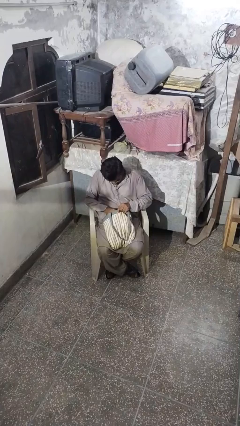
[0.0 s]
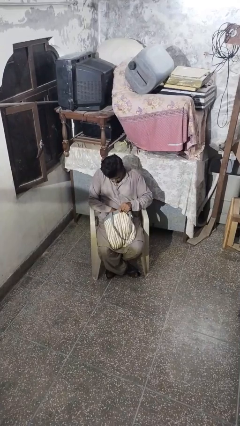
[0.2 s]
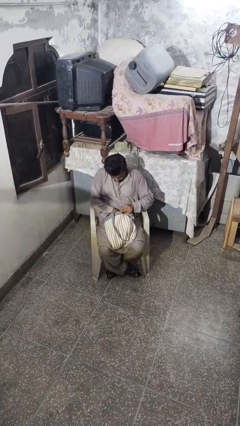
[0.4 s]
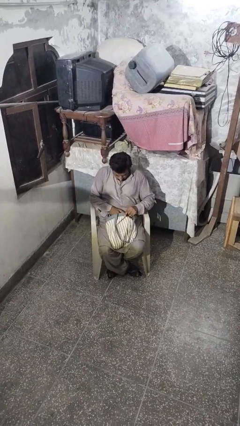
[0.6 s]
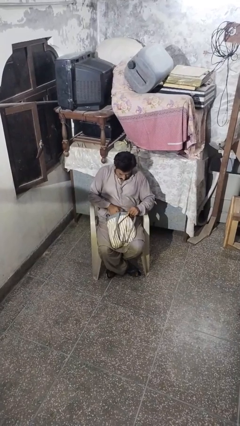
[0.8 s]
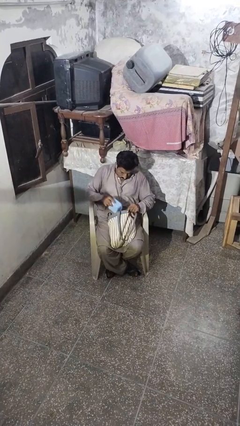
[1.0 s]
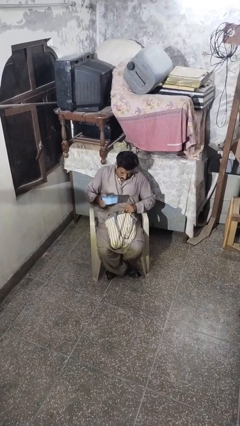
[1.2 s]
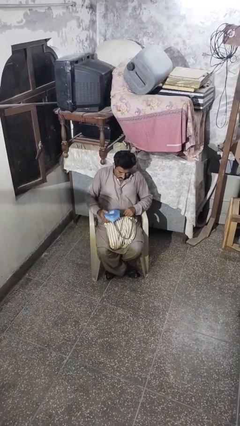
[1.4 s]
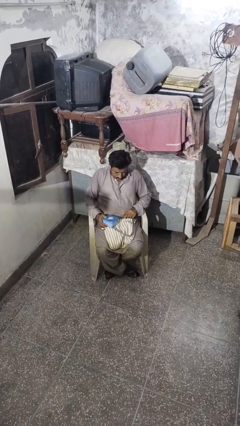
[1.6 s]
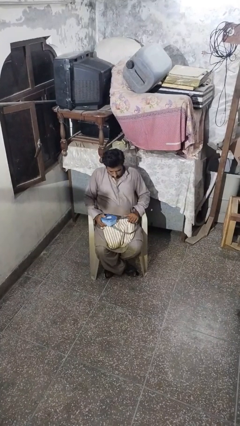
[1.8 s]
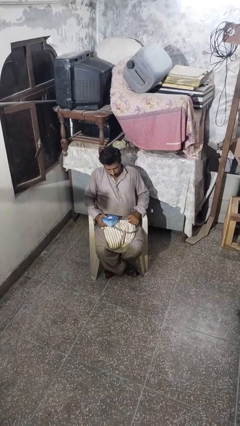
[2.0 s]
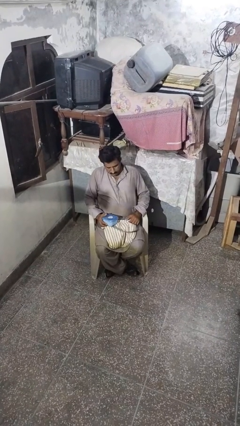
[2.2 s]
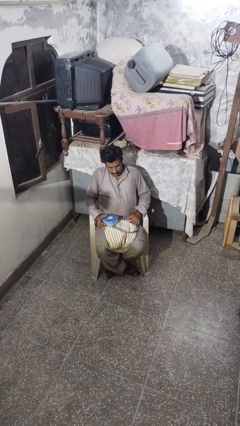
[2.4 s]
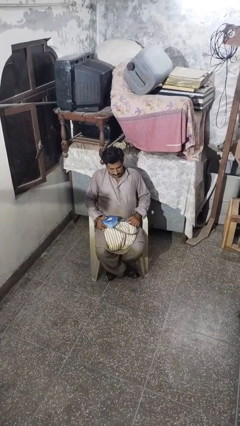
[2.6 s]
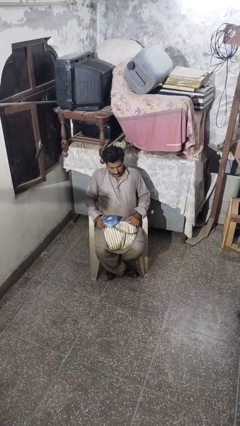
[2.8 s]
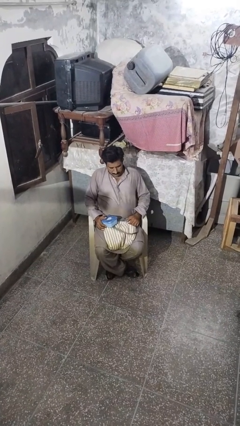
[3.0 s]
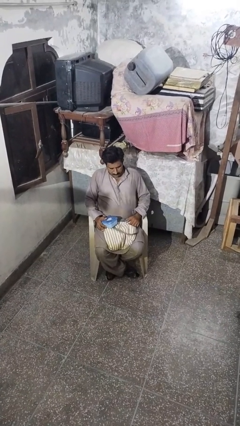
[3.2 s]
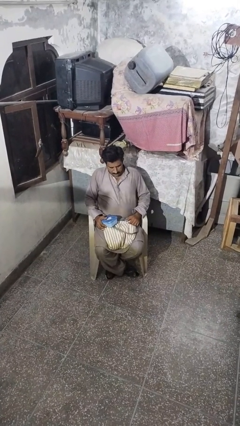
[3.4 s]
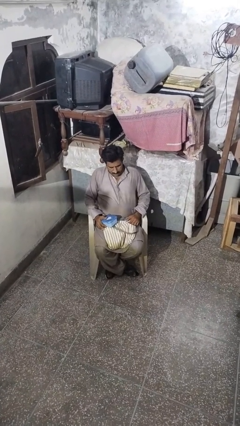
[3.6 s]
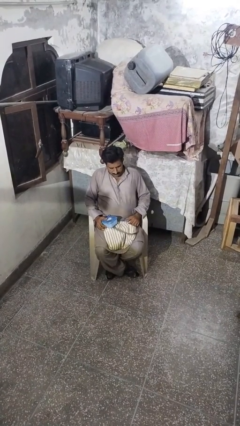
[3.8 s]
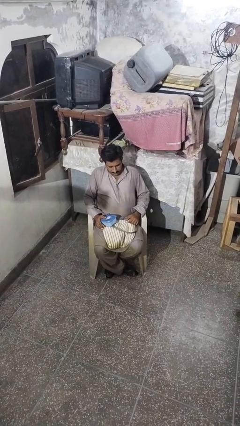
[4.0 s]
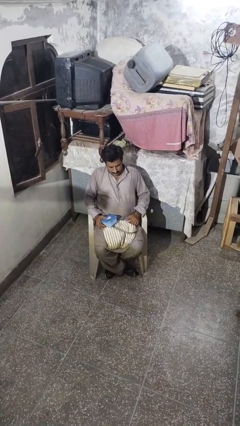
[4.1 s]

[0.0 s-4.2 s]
person takes object from backpack

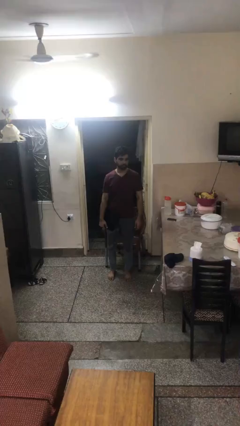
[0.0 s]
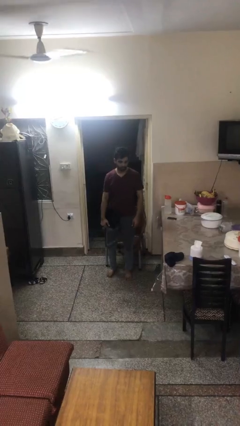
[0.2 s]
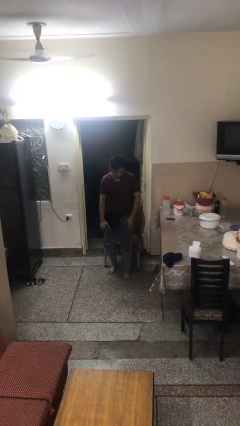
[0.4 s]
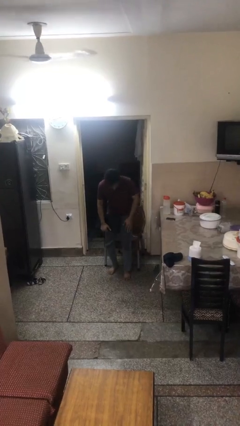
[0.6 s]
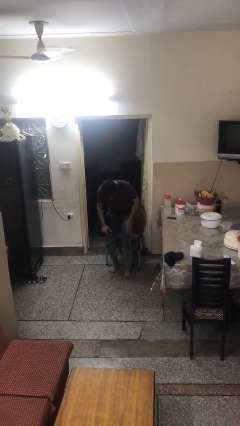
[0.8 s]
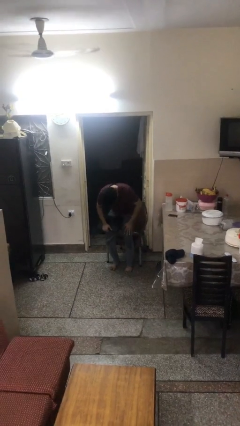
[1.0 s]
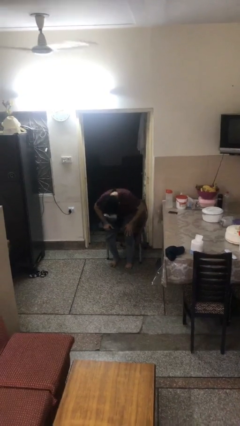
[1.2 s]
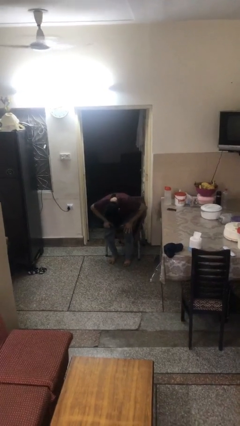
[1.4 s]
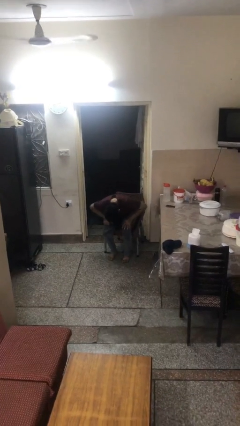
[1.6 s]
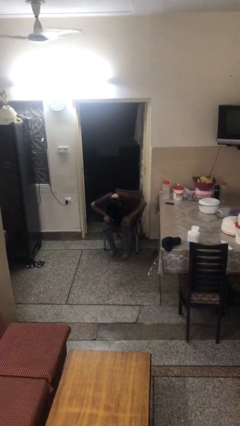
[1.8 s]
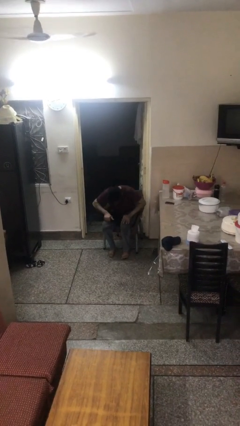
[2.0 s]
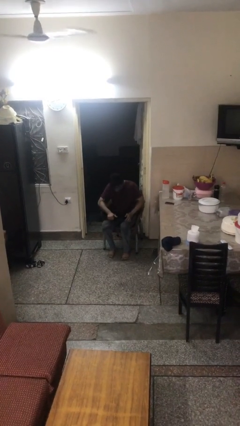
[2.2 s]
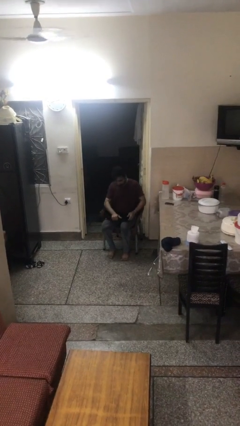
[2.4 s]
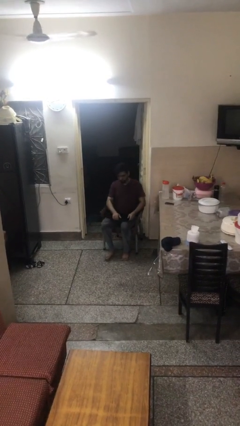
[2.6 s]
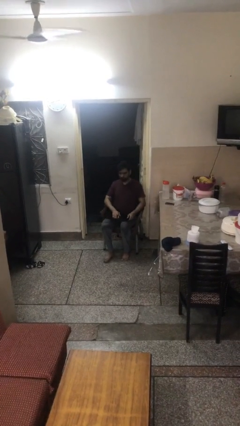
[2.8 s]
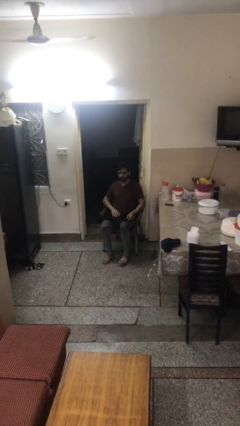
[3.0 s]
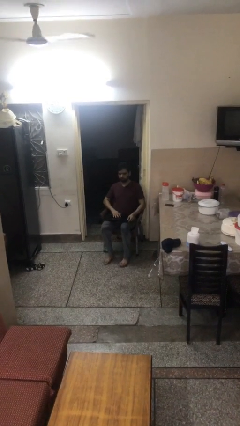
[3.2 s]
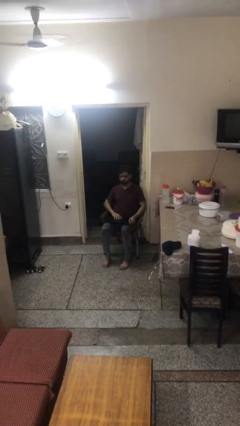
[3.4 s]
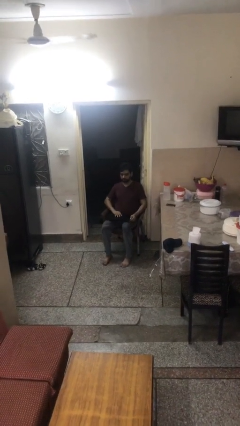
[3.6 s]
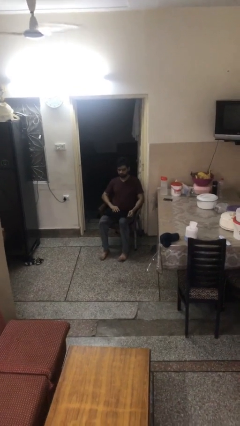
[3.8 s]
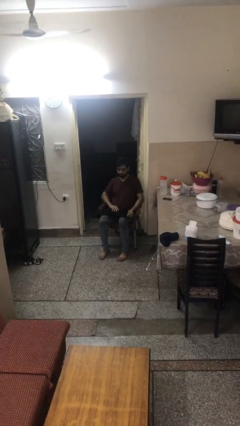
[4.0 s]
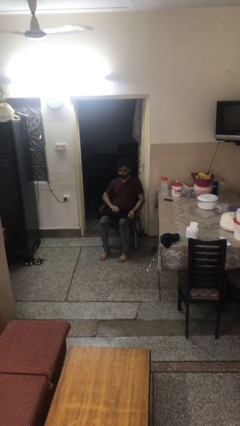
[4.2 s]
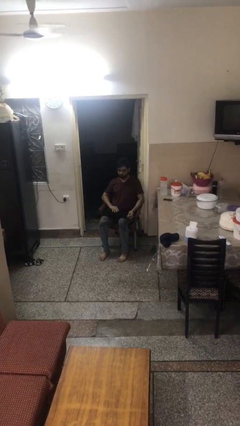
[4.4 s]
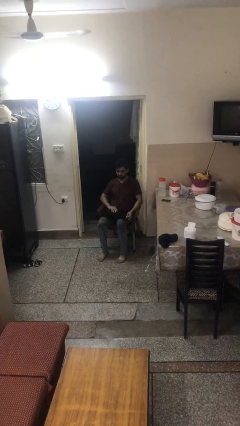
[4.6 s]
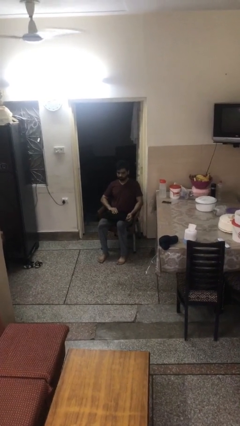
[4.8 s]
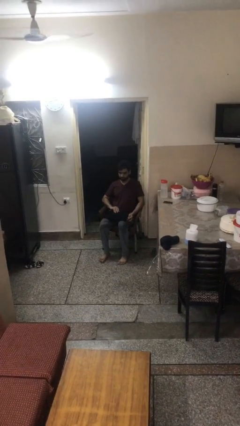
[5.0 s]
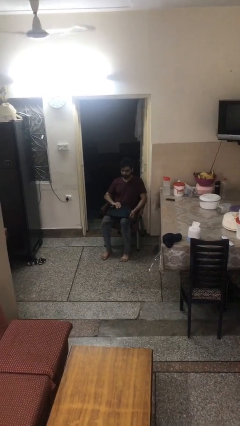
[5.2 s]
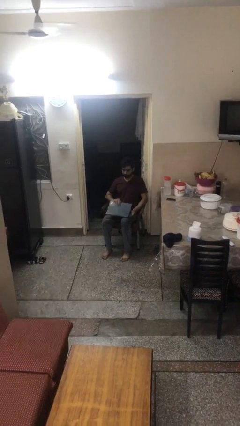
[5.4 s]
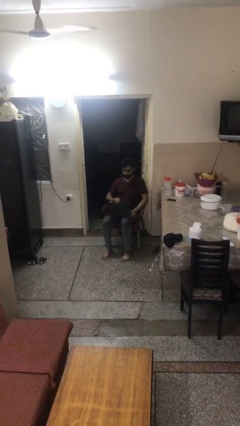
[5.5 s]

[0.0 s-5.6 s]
person sits down

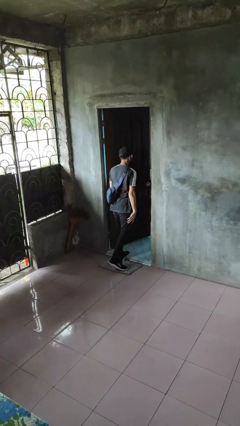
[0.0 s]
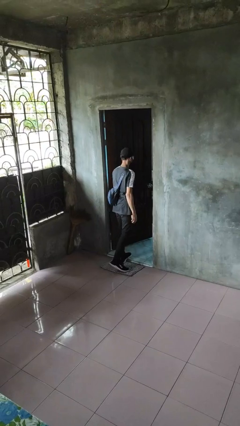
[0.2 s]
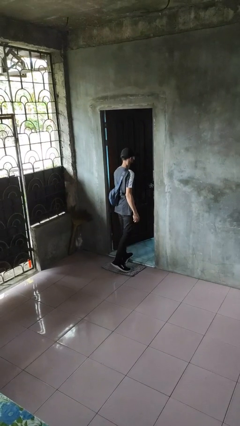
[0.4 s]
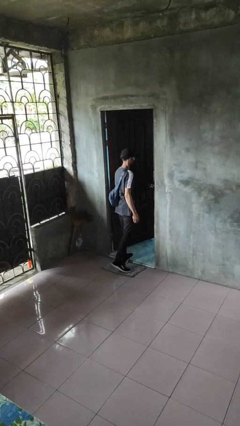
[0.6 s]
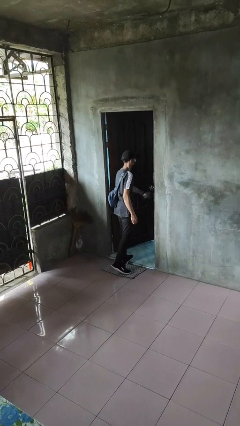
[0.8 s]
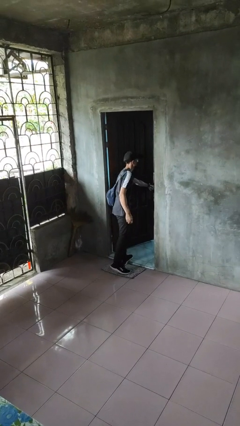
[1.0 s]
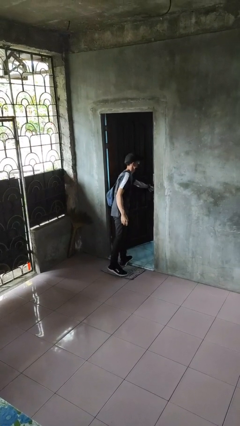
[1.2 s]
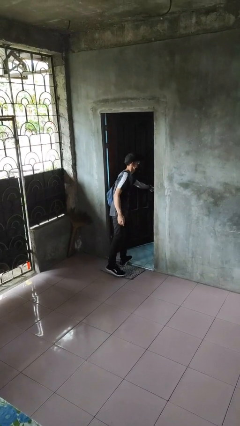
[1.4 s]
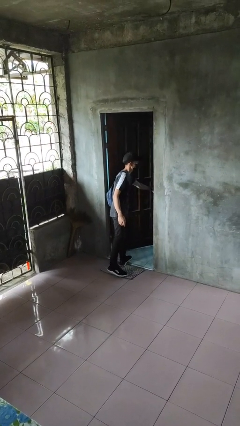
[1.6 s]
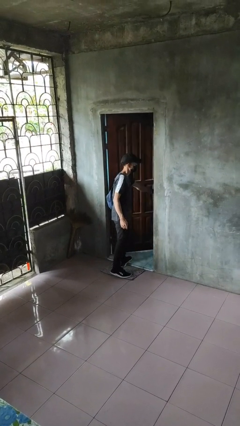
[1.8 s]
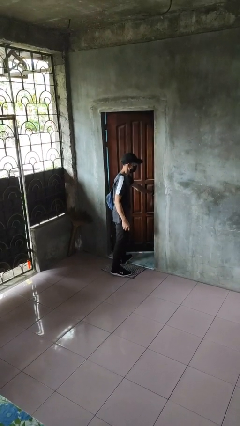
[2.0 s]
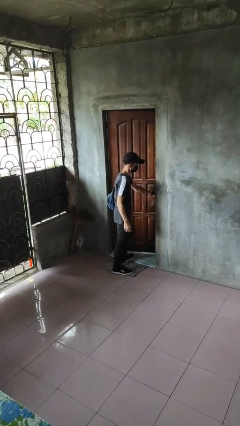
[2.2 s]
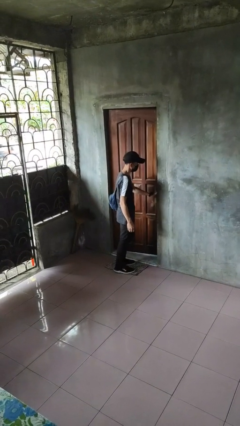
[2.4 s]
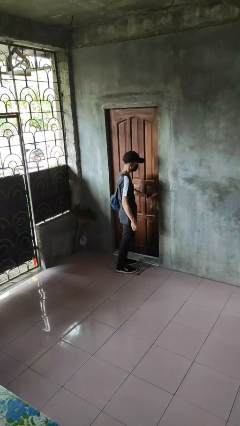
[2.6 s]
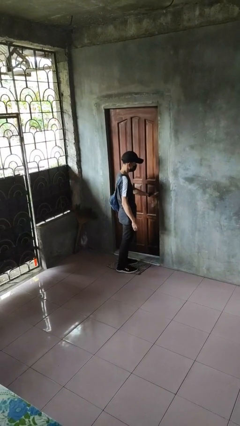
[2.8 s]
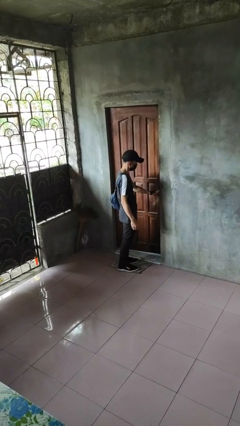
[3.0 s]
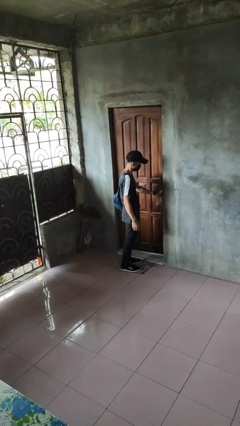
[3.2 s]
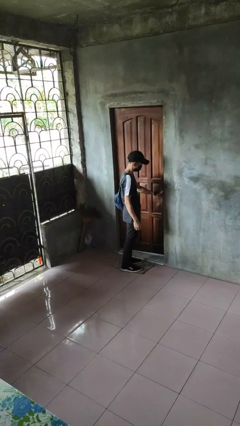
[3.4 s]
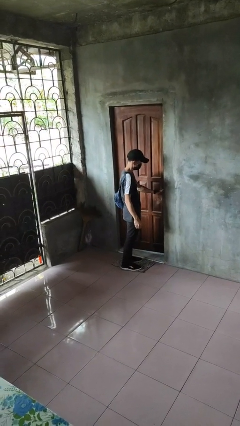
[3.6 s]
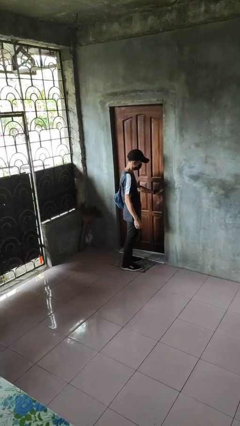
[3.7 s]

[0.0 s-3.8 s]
person closes facility door

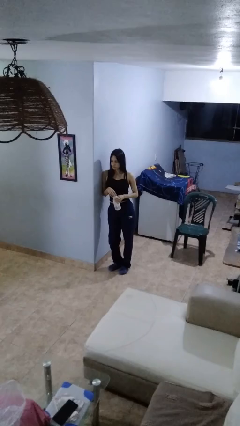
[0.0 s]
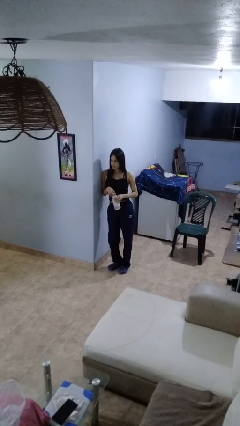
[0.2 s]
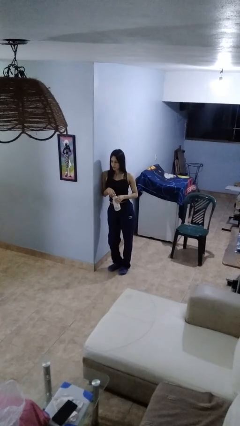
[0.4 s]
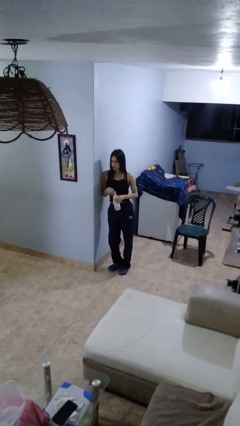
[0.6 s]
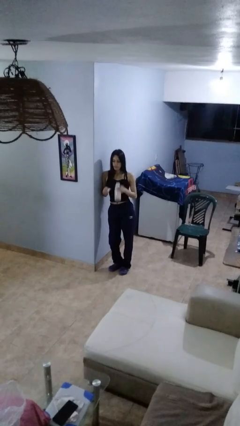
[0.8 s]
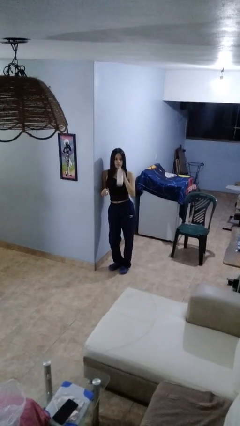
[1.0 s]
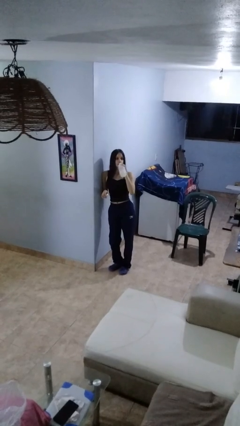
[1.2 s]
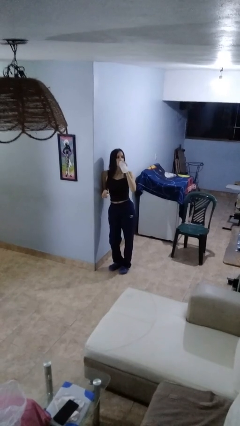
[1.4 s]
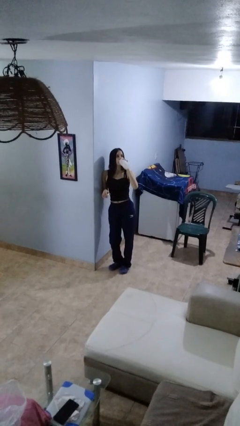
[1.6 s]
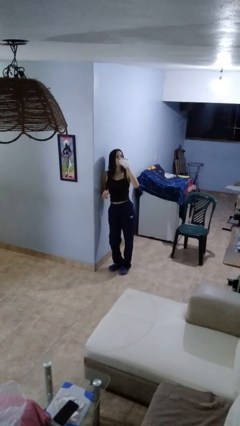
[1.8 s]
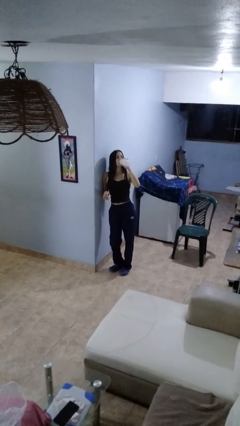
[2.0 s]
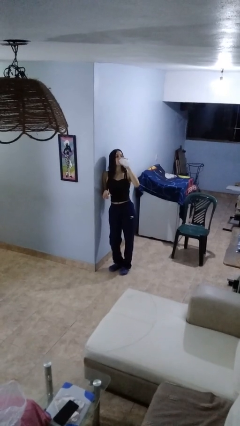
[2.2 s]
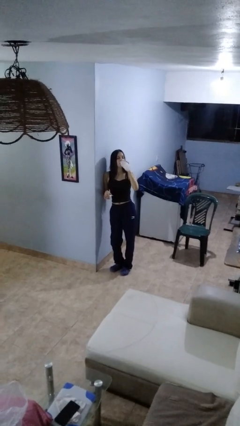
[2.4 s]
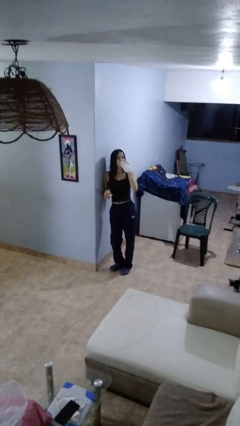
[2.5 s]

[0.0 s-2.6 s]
person drinks from bottle

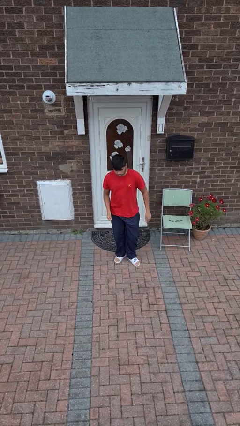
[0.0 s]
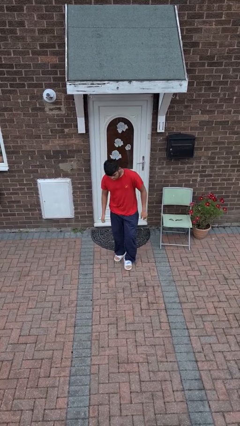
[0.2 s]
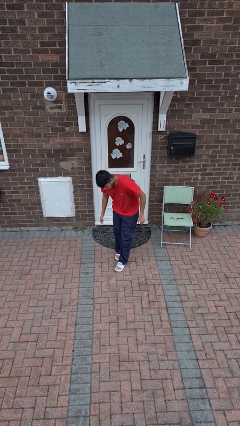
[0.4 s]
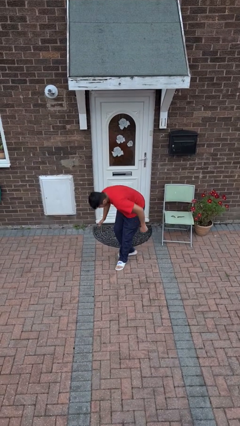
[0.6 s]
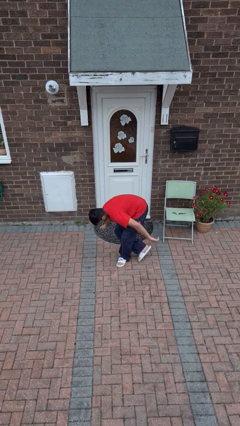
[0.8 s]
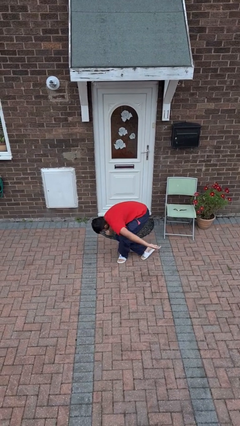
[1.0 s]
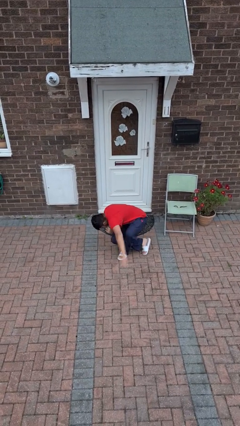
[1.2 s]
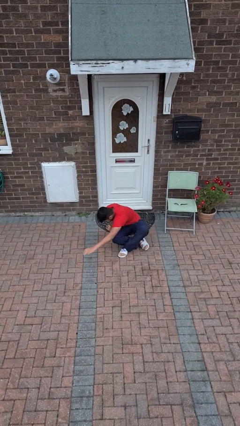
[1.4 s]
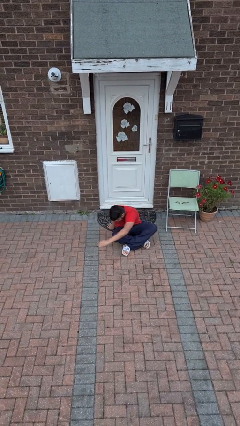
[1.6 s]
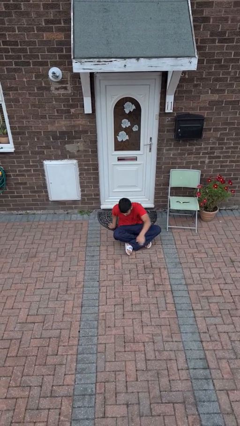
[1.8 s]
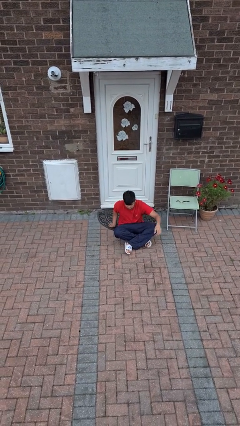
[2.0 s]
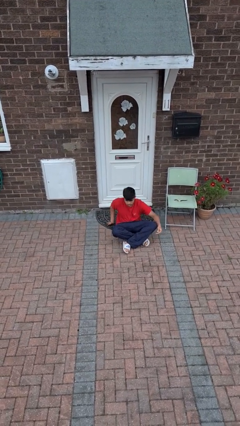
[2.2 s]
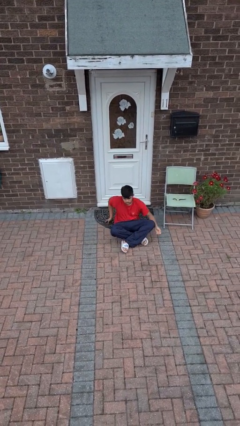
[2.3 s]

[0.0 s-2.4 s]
person sits crisscross
